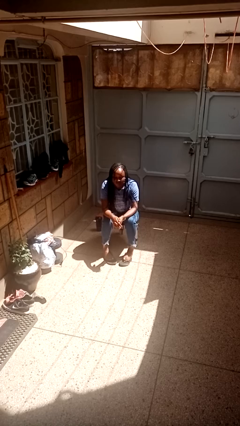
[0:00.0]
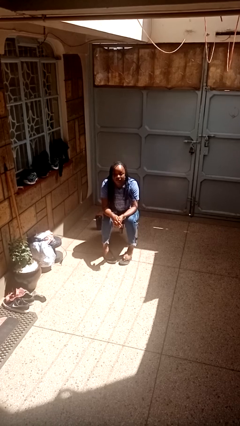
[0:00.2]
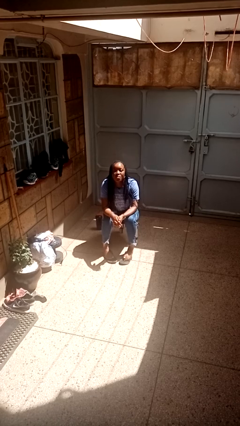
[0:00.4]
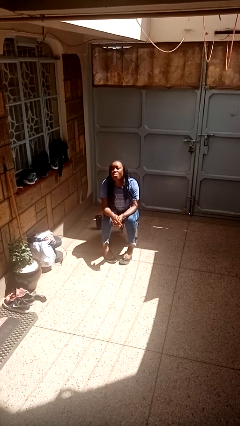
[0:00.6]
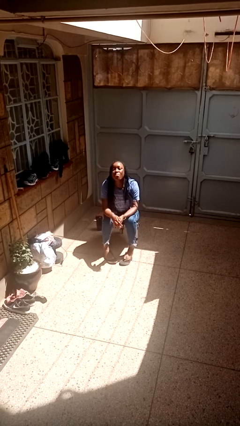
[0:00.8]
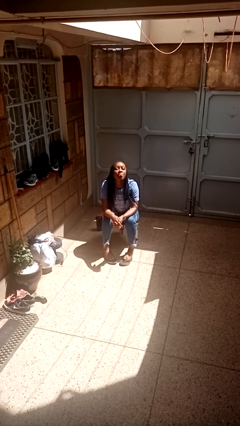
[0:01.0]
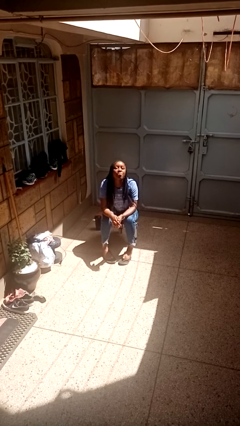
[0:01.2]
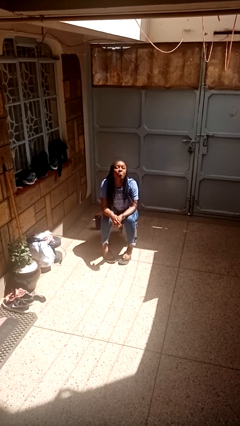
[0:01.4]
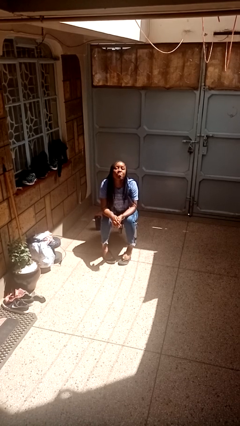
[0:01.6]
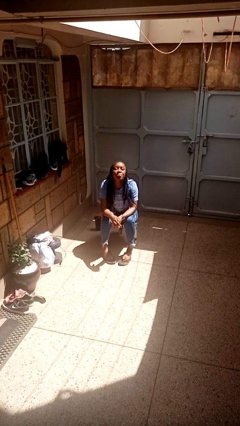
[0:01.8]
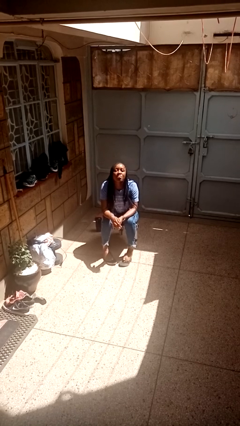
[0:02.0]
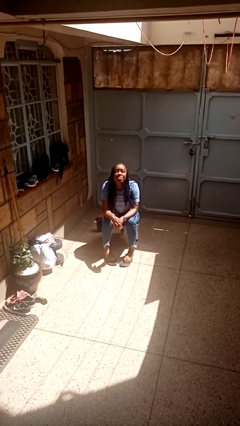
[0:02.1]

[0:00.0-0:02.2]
person sticks out tongue

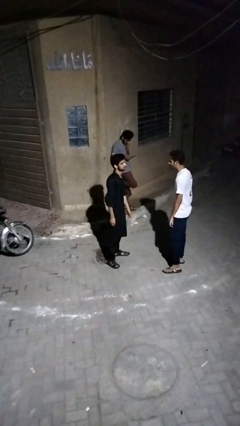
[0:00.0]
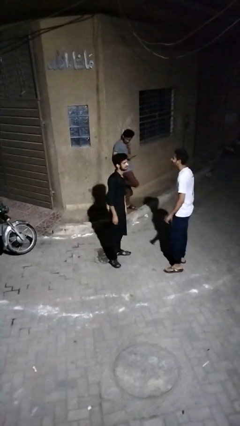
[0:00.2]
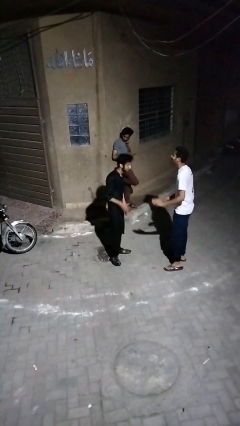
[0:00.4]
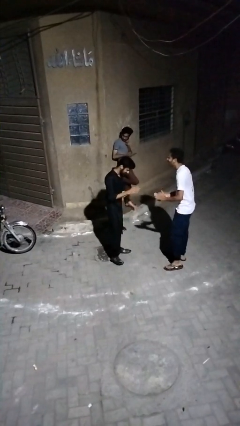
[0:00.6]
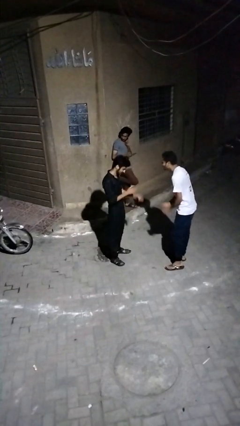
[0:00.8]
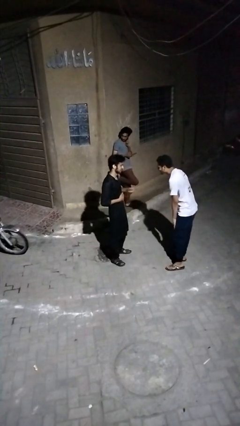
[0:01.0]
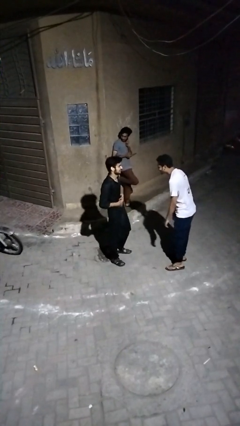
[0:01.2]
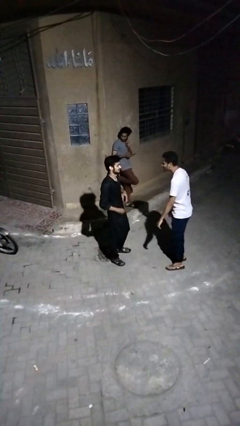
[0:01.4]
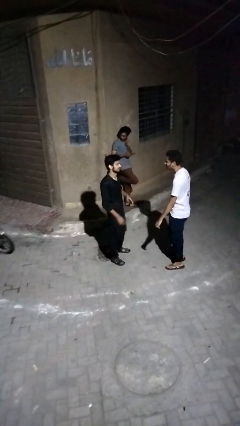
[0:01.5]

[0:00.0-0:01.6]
person laughs with person

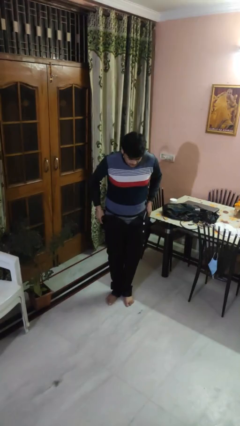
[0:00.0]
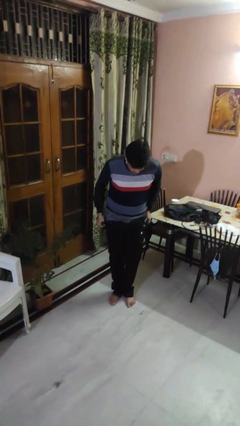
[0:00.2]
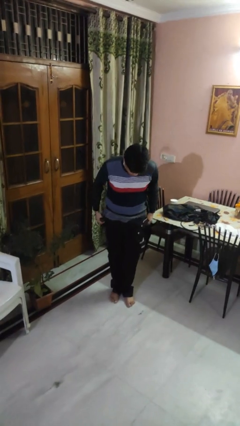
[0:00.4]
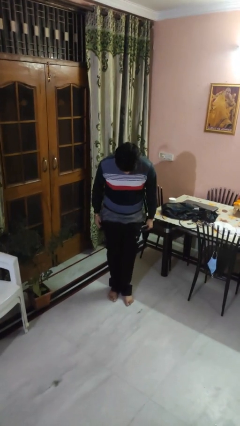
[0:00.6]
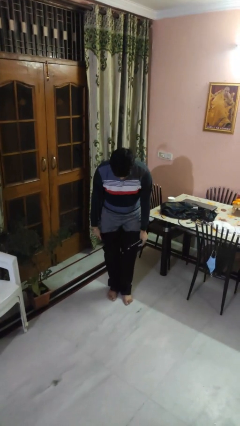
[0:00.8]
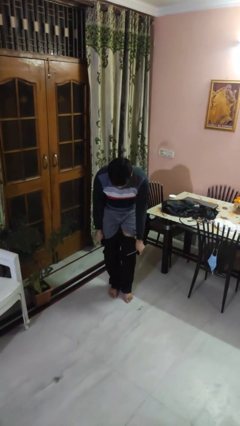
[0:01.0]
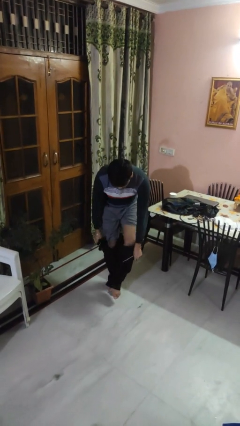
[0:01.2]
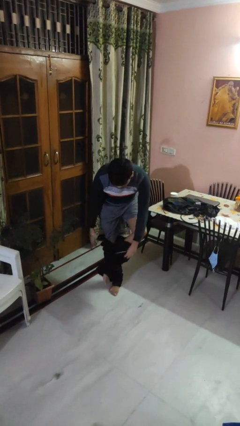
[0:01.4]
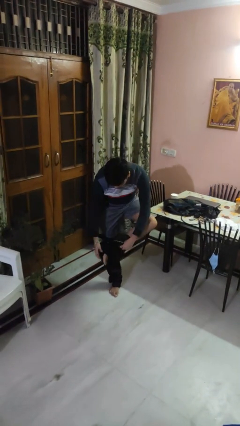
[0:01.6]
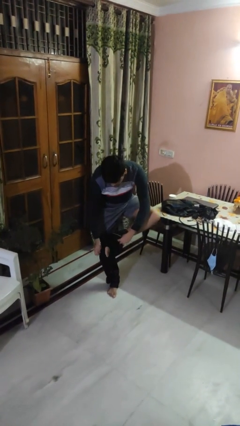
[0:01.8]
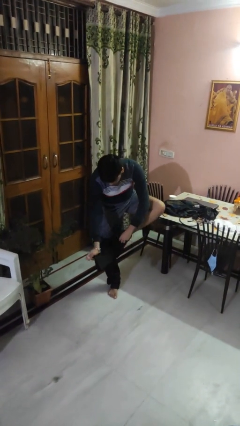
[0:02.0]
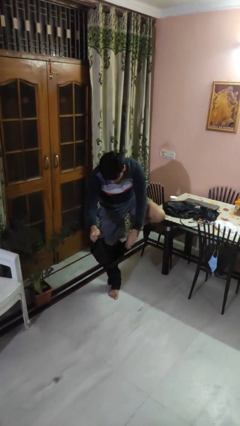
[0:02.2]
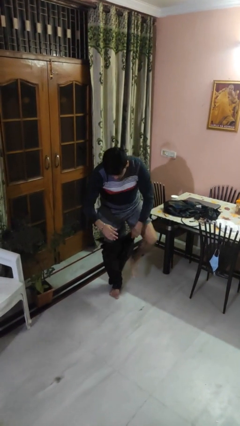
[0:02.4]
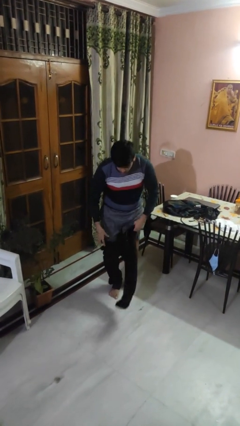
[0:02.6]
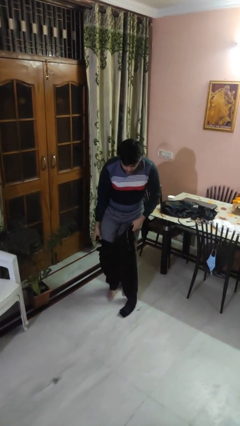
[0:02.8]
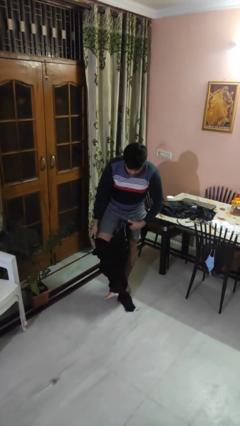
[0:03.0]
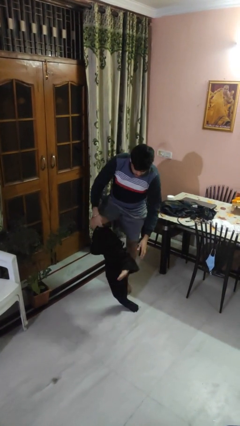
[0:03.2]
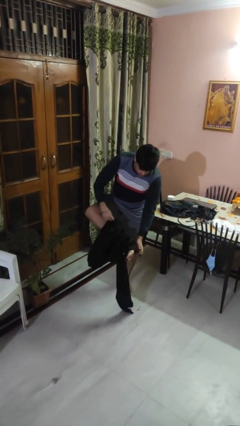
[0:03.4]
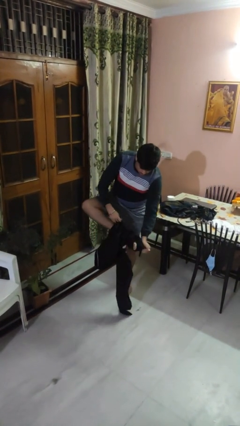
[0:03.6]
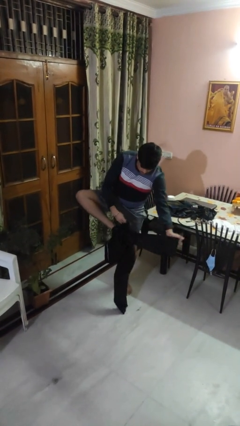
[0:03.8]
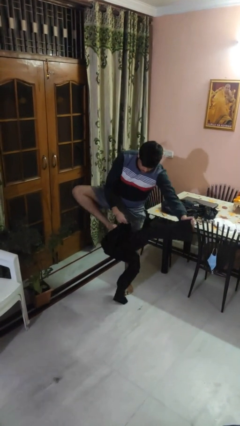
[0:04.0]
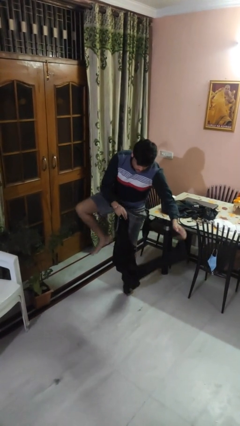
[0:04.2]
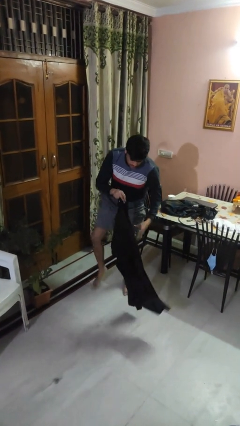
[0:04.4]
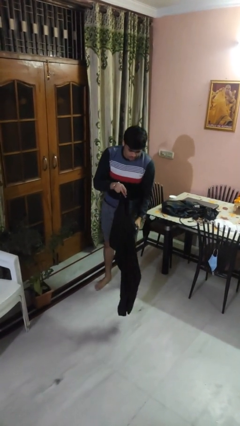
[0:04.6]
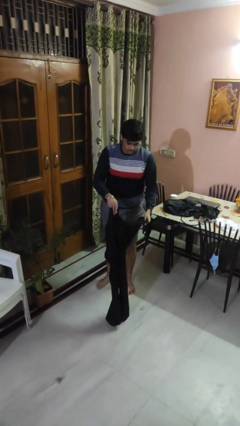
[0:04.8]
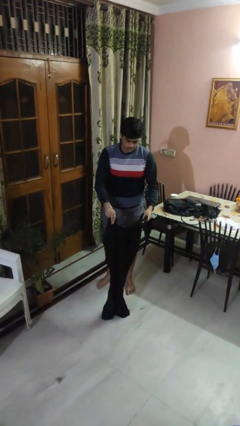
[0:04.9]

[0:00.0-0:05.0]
person takes off pants

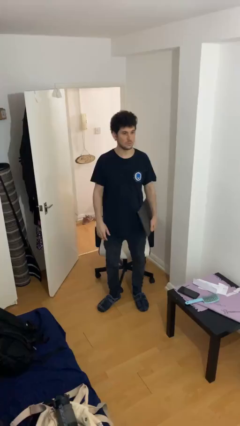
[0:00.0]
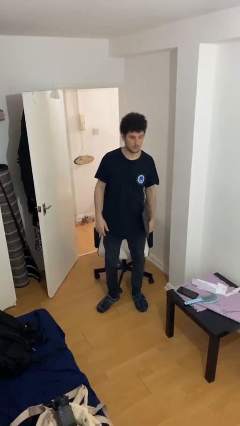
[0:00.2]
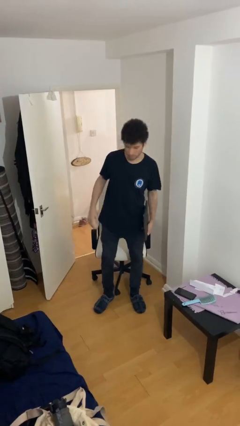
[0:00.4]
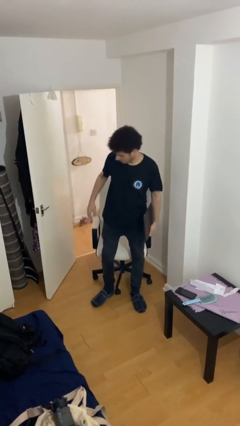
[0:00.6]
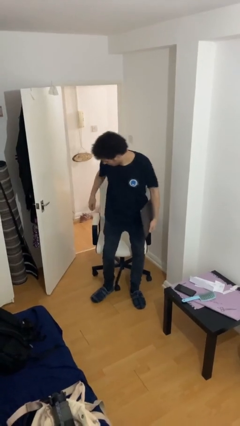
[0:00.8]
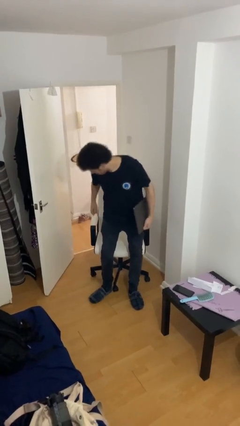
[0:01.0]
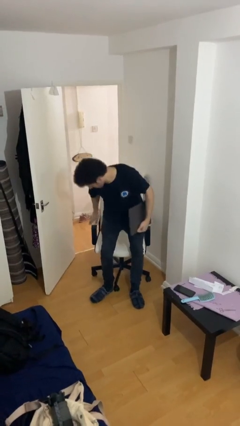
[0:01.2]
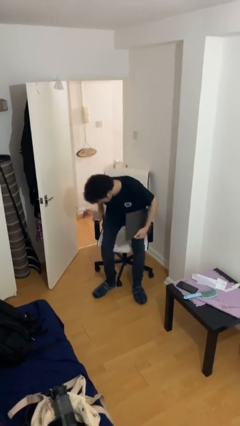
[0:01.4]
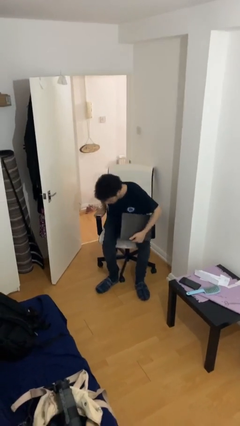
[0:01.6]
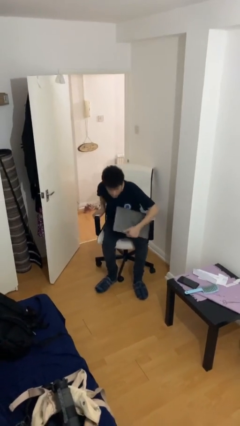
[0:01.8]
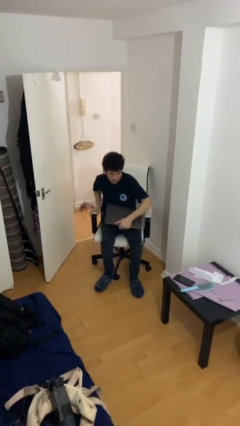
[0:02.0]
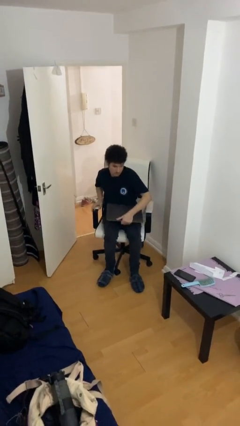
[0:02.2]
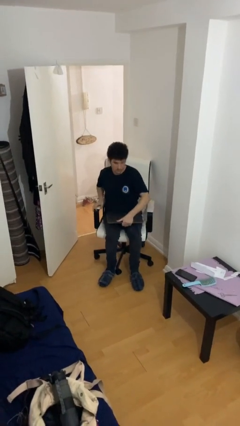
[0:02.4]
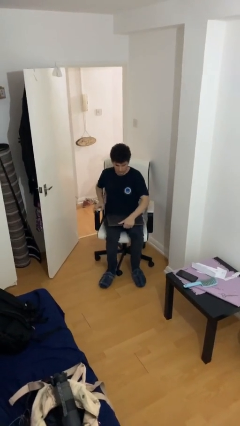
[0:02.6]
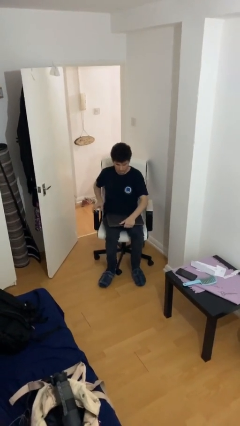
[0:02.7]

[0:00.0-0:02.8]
person sits down

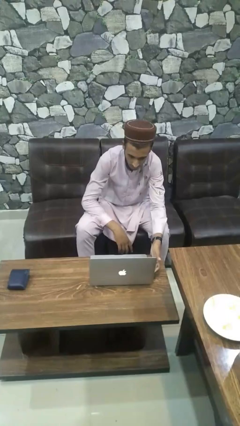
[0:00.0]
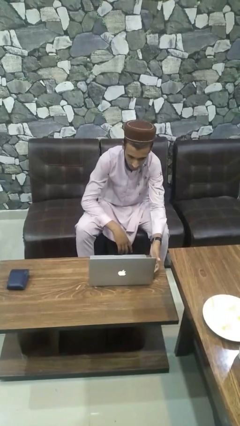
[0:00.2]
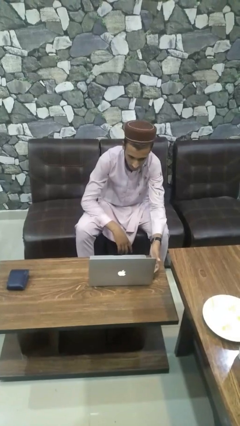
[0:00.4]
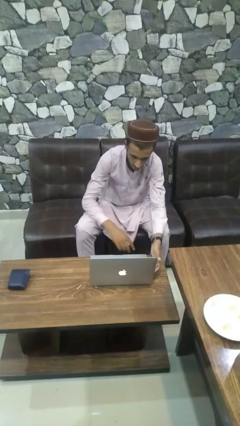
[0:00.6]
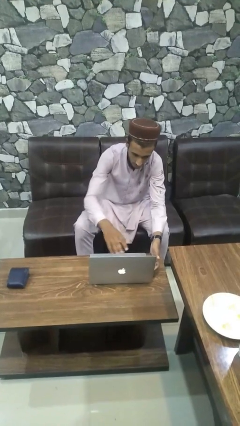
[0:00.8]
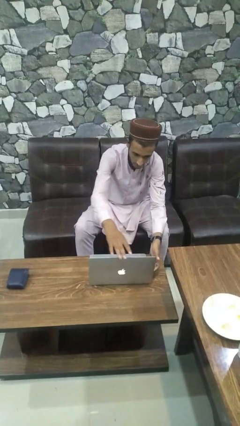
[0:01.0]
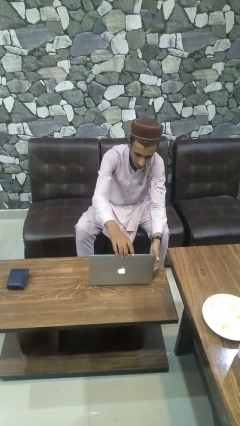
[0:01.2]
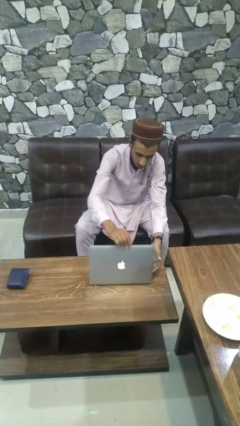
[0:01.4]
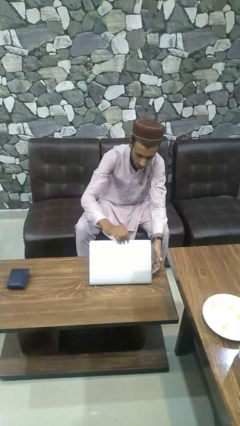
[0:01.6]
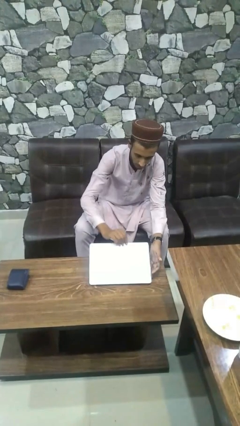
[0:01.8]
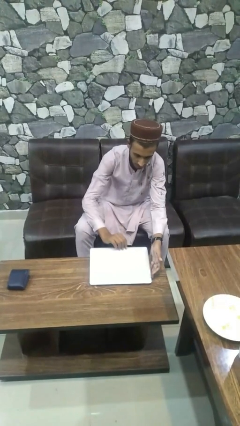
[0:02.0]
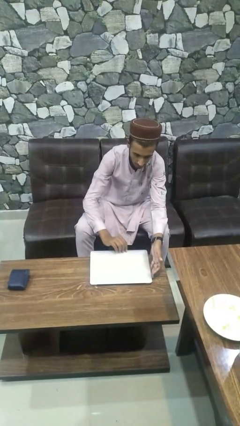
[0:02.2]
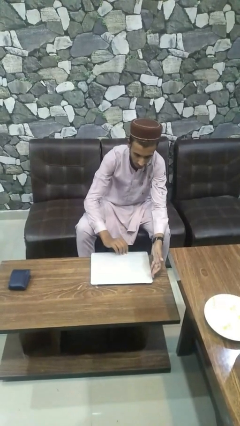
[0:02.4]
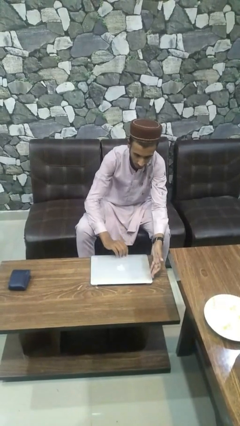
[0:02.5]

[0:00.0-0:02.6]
person closes laptop

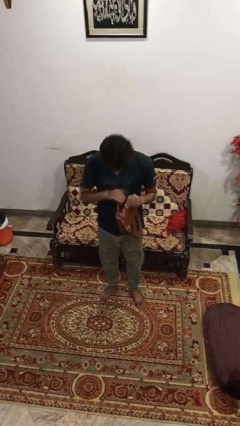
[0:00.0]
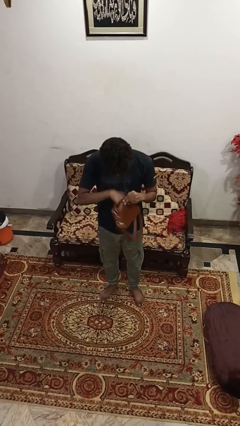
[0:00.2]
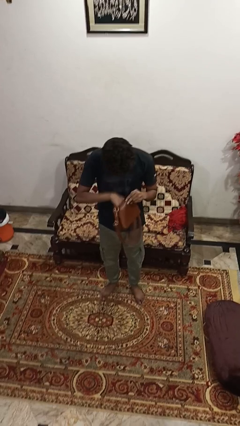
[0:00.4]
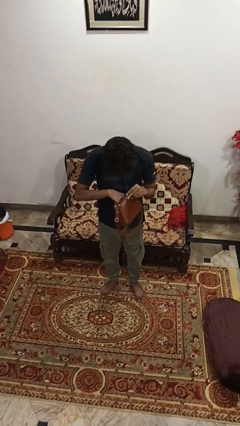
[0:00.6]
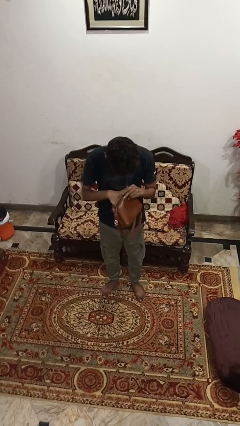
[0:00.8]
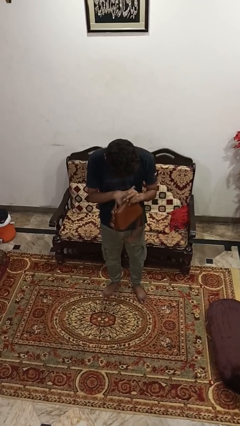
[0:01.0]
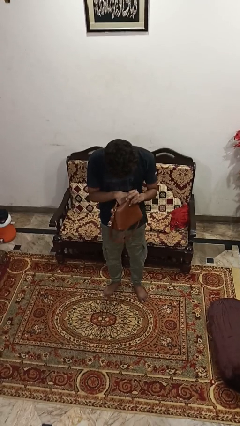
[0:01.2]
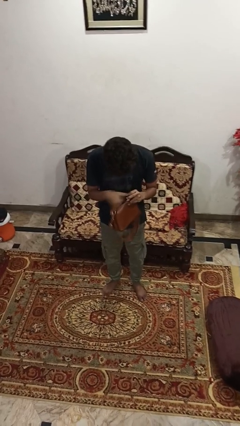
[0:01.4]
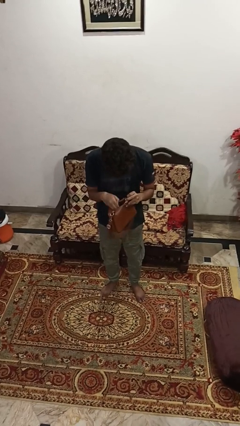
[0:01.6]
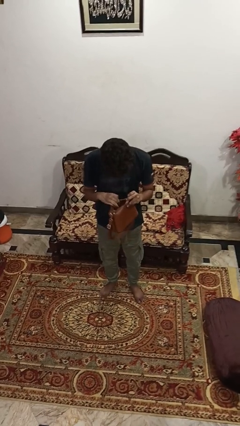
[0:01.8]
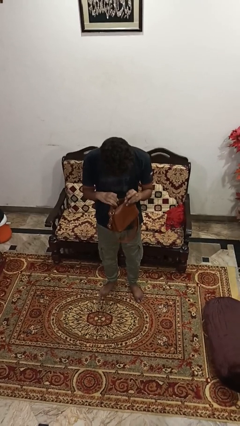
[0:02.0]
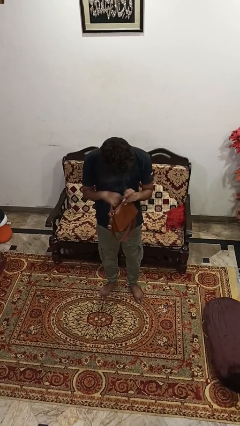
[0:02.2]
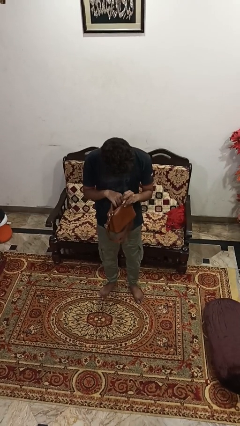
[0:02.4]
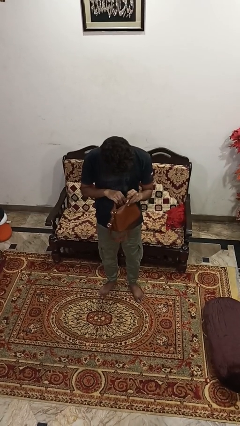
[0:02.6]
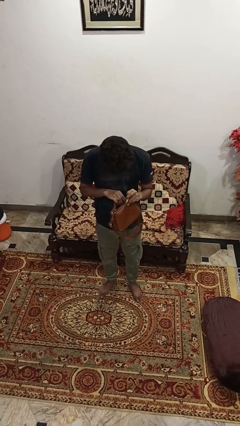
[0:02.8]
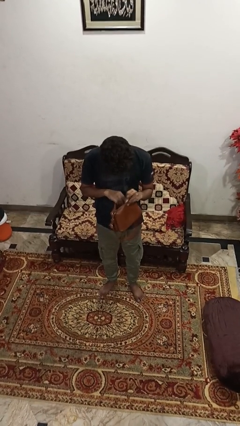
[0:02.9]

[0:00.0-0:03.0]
person searches in purse

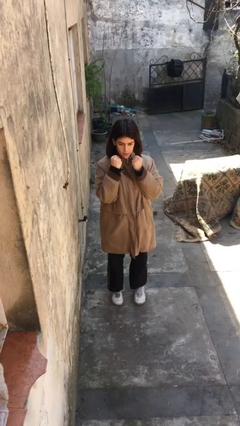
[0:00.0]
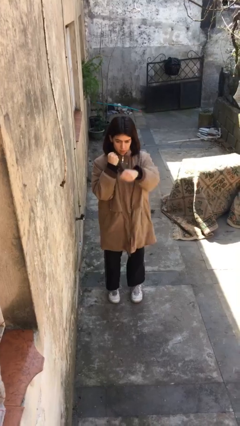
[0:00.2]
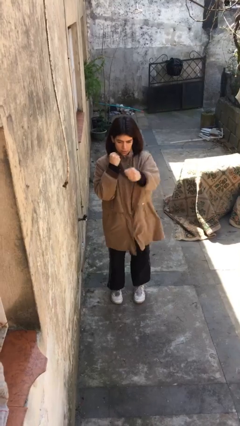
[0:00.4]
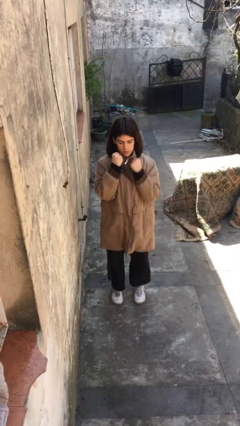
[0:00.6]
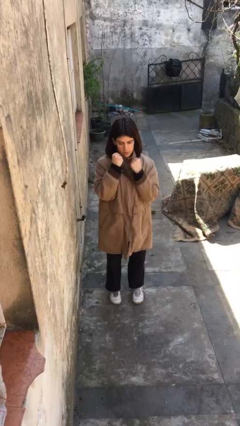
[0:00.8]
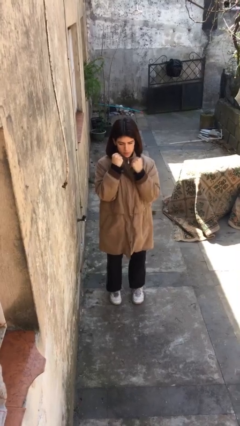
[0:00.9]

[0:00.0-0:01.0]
person punches
